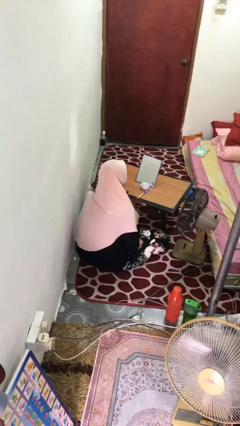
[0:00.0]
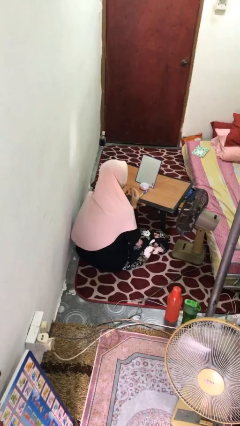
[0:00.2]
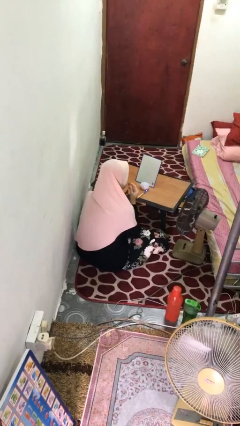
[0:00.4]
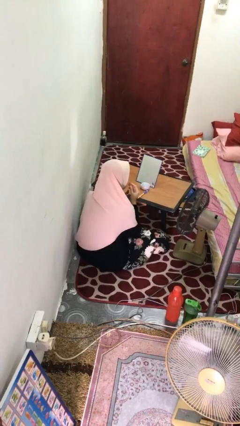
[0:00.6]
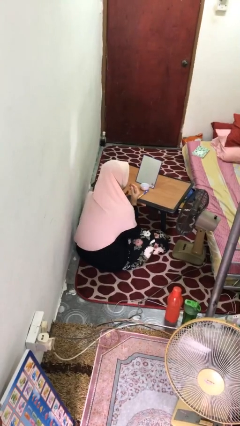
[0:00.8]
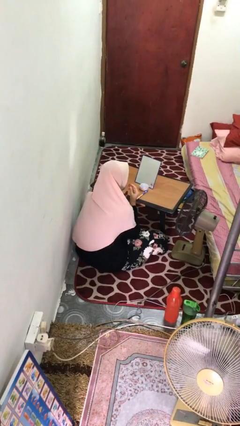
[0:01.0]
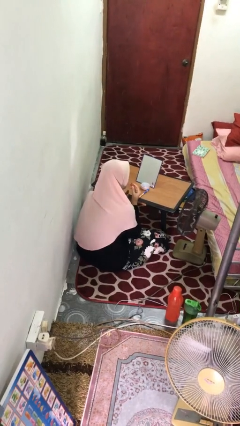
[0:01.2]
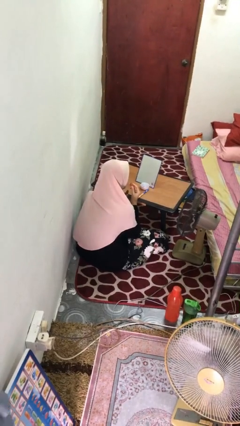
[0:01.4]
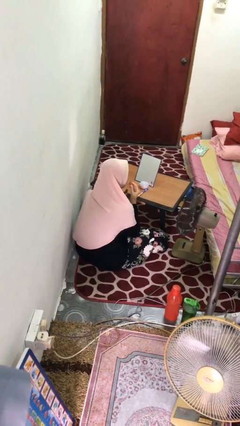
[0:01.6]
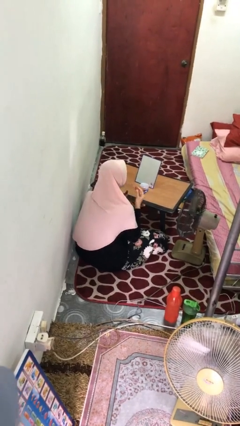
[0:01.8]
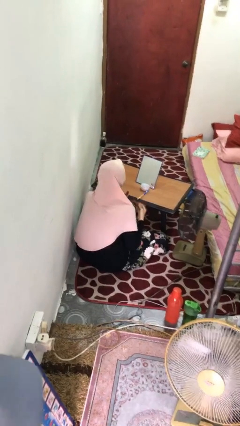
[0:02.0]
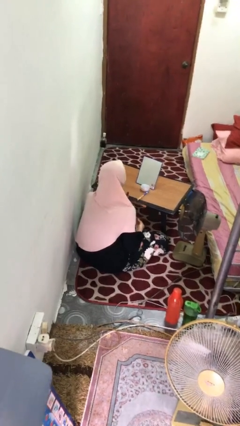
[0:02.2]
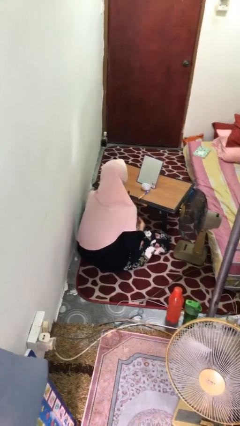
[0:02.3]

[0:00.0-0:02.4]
person applies lip makeup

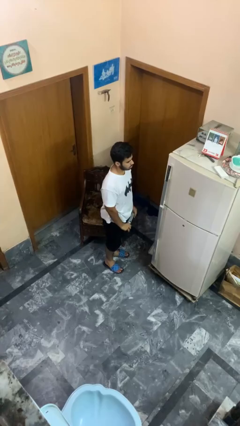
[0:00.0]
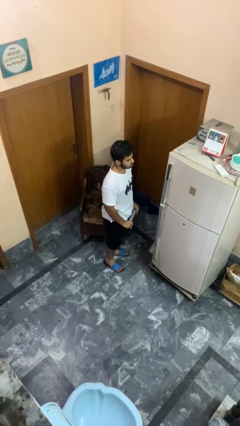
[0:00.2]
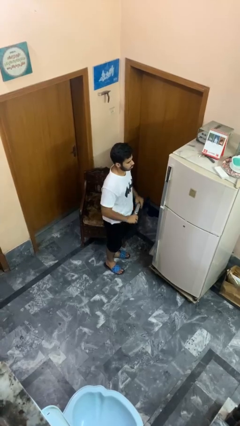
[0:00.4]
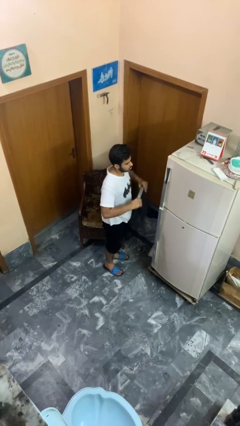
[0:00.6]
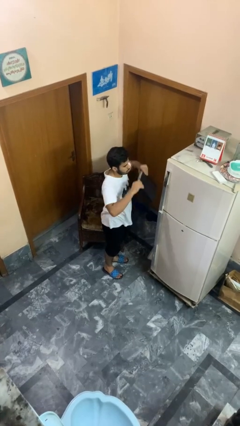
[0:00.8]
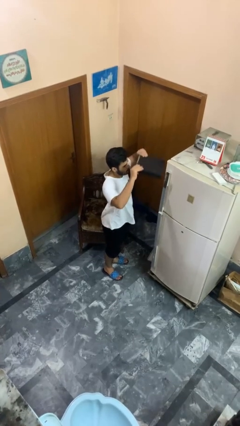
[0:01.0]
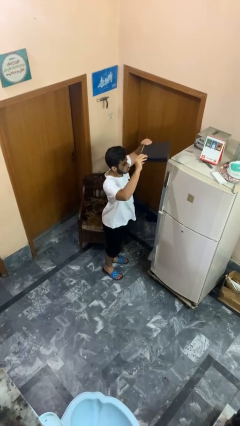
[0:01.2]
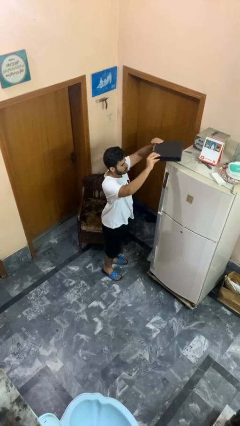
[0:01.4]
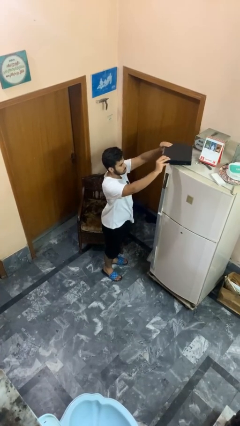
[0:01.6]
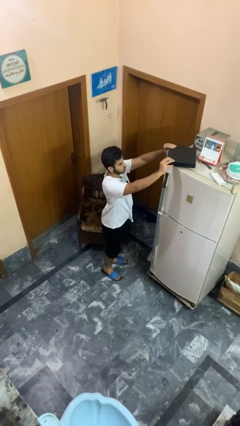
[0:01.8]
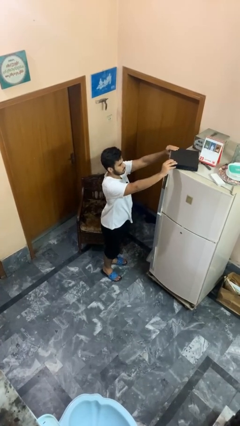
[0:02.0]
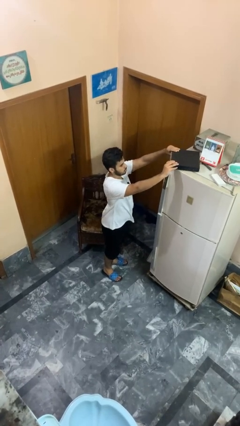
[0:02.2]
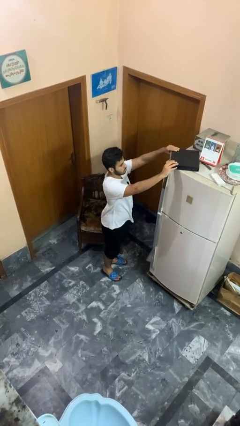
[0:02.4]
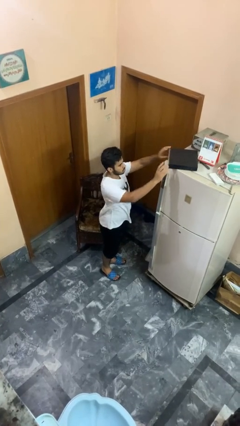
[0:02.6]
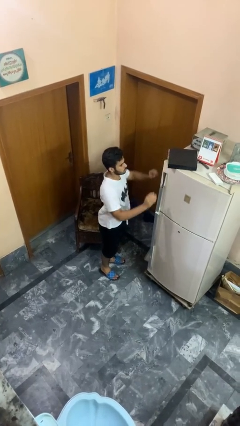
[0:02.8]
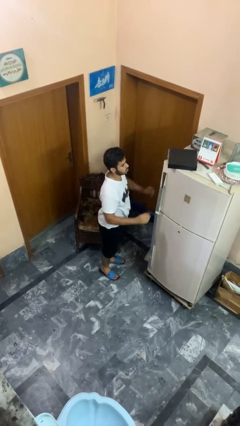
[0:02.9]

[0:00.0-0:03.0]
person puts down object on countertop

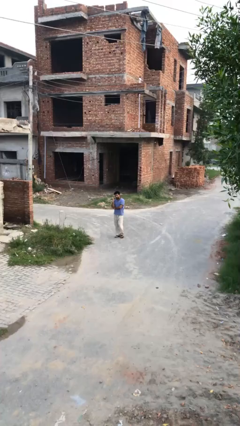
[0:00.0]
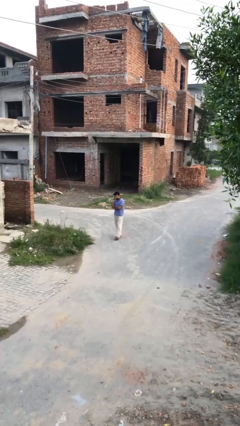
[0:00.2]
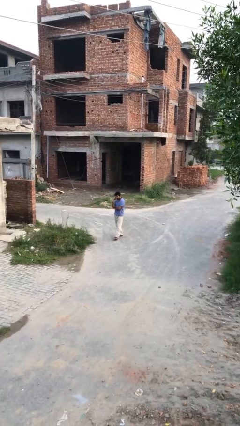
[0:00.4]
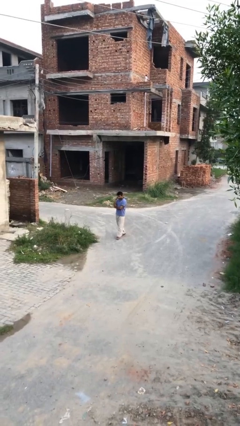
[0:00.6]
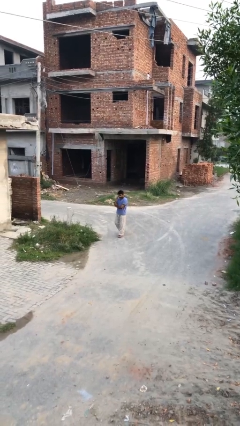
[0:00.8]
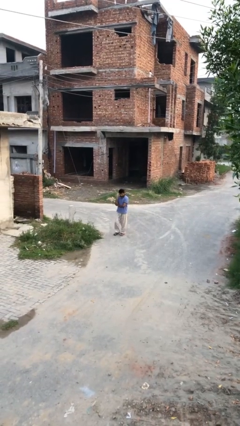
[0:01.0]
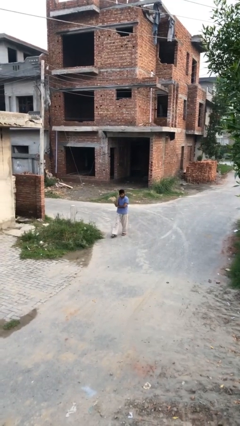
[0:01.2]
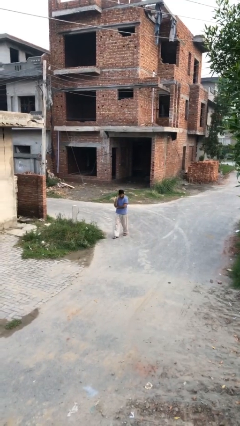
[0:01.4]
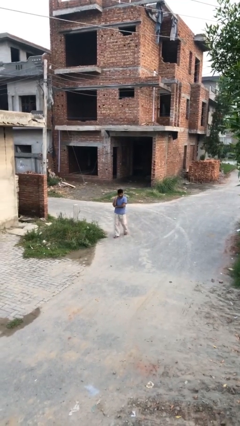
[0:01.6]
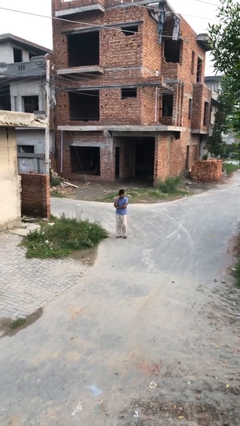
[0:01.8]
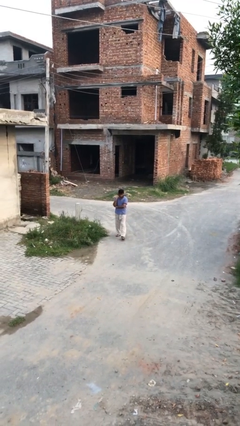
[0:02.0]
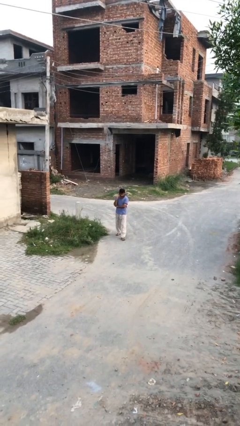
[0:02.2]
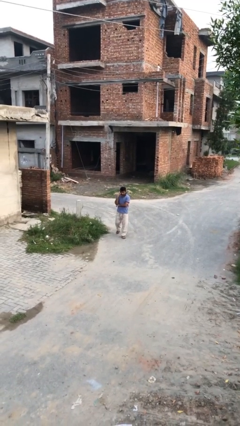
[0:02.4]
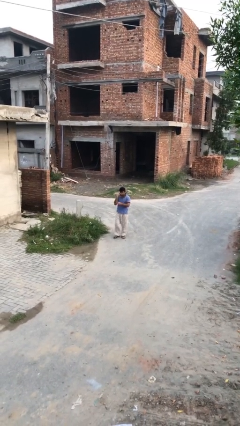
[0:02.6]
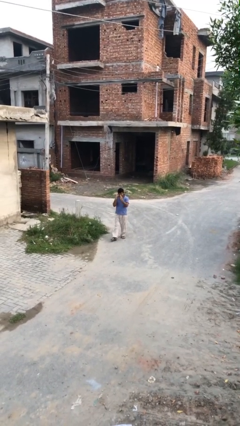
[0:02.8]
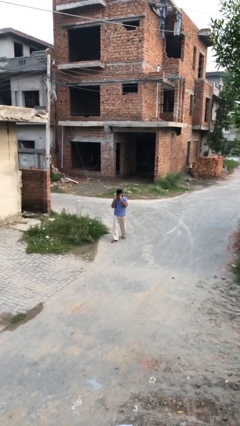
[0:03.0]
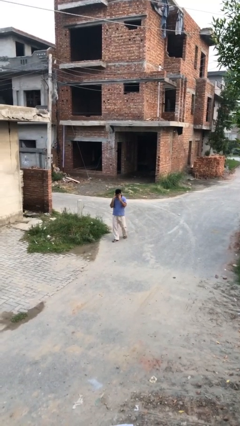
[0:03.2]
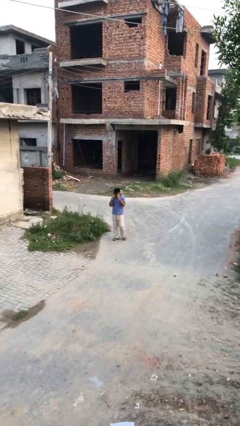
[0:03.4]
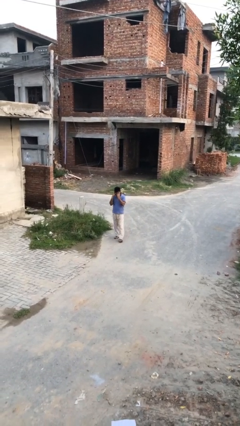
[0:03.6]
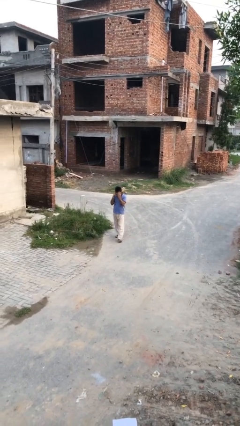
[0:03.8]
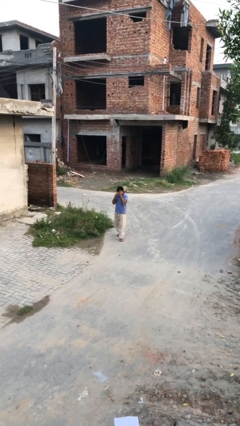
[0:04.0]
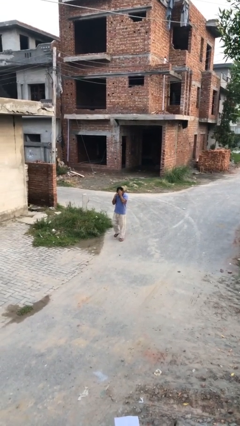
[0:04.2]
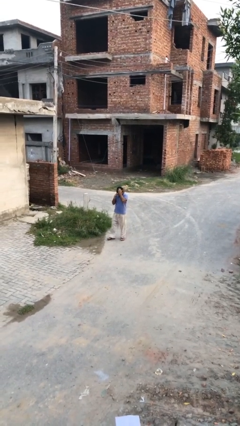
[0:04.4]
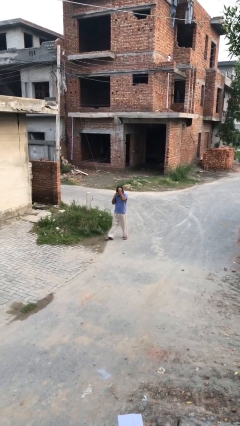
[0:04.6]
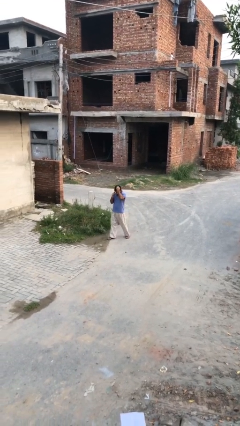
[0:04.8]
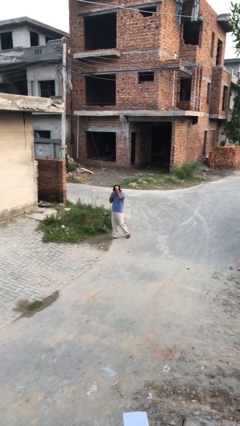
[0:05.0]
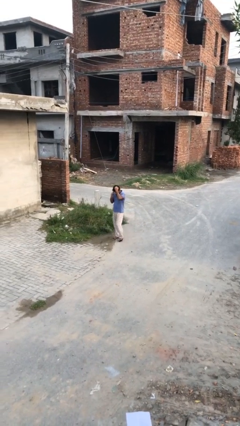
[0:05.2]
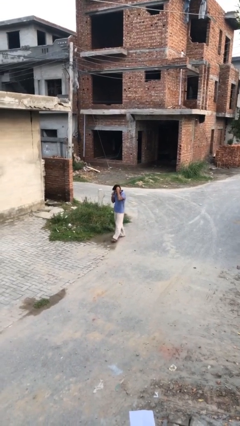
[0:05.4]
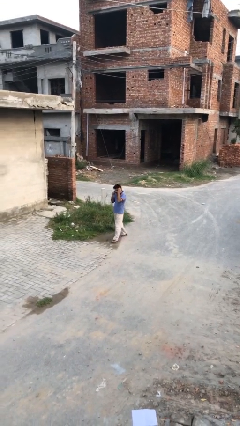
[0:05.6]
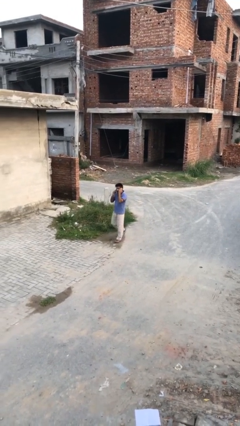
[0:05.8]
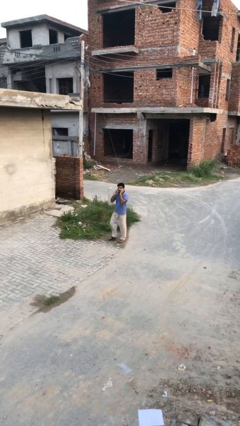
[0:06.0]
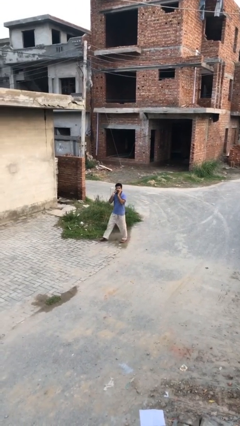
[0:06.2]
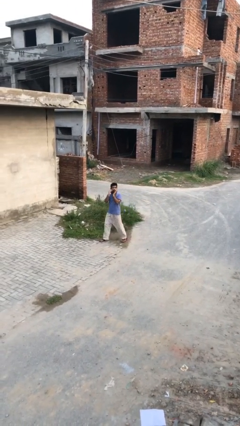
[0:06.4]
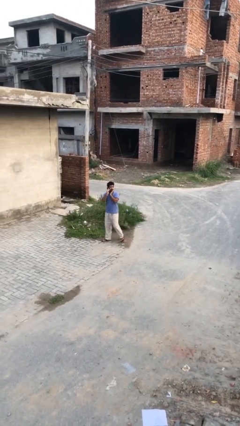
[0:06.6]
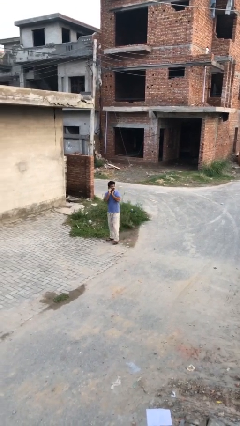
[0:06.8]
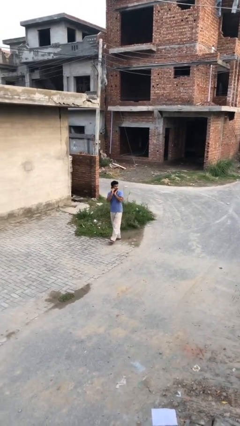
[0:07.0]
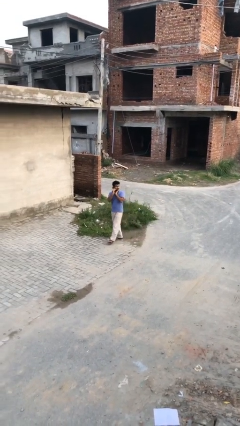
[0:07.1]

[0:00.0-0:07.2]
person talks on phone

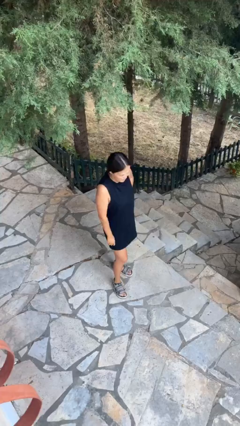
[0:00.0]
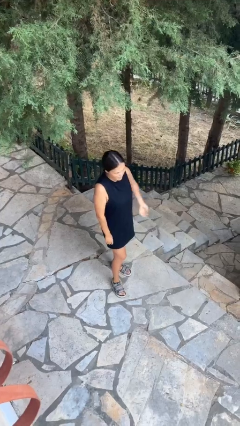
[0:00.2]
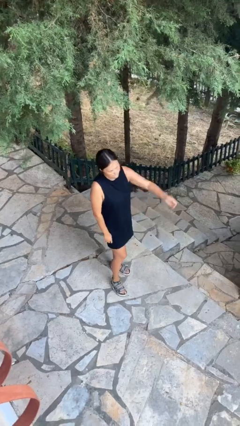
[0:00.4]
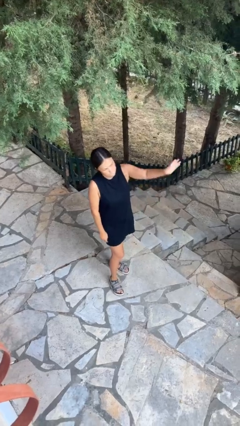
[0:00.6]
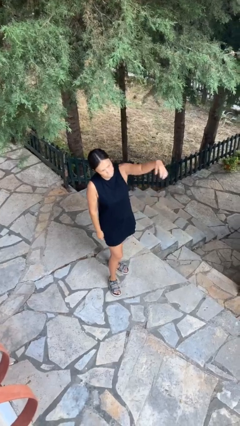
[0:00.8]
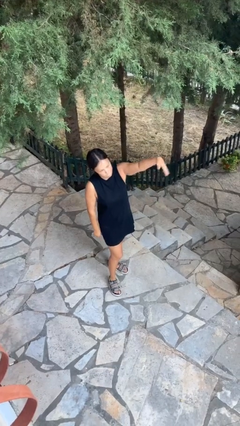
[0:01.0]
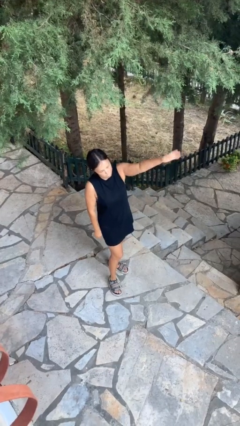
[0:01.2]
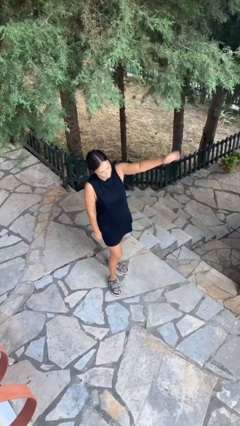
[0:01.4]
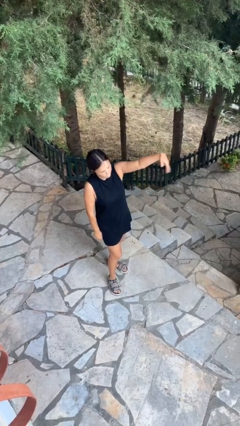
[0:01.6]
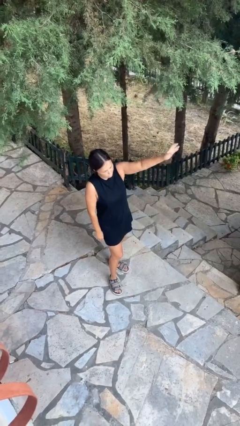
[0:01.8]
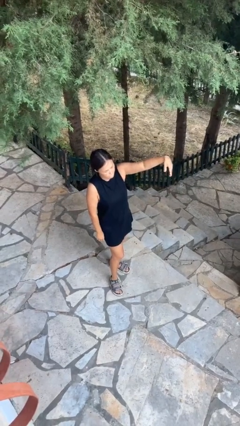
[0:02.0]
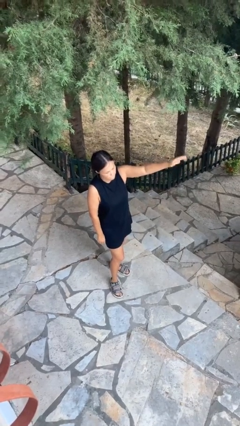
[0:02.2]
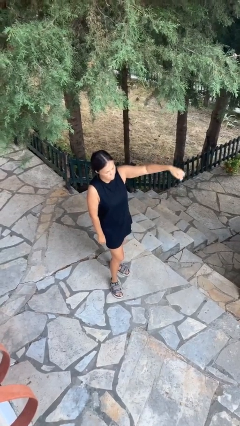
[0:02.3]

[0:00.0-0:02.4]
person gestures come here

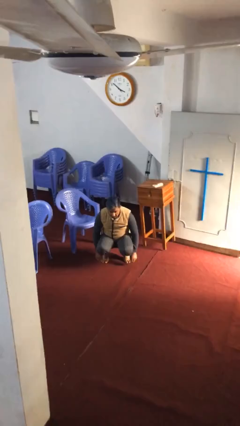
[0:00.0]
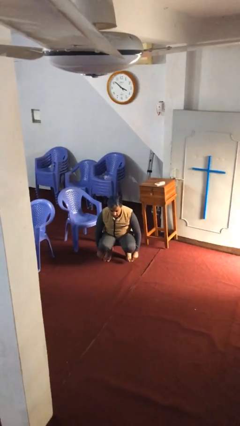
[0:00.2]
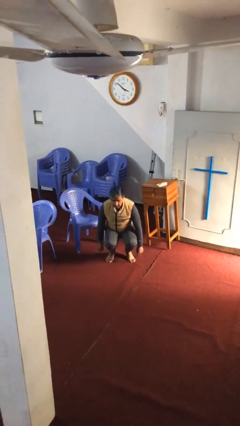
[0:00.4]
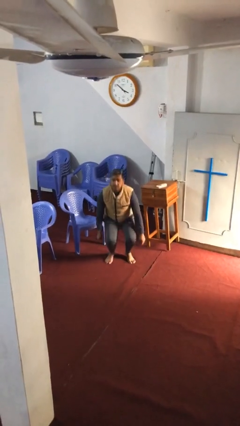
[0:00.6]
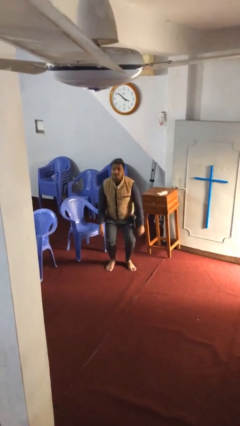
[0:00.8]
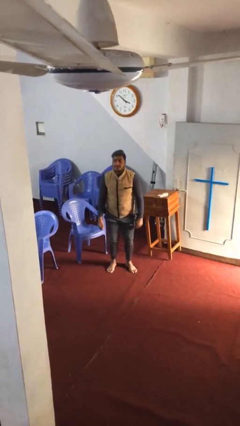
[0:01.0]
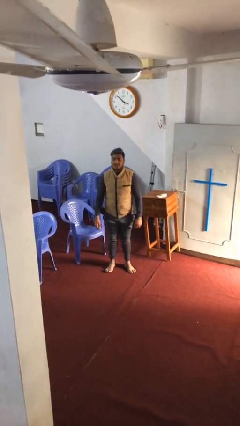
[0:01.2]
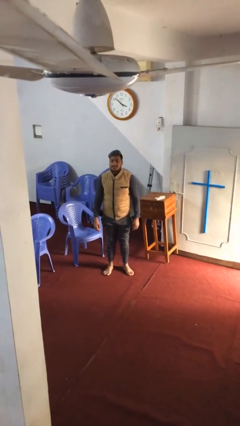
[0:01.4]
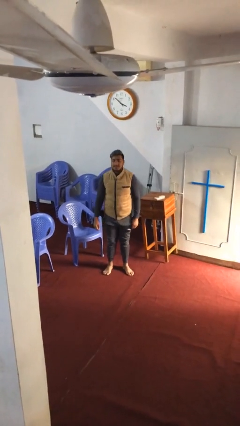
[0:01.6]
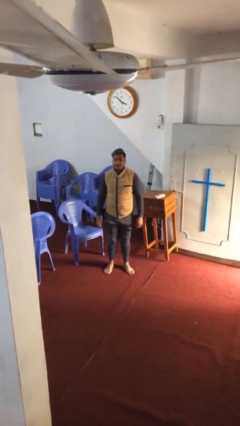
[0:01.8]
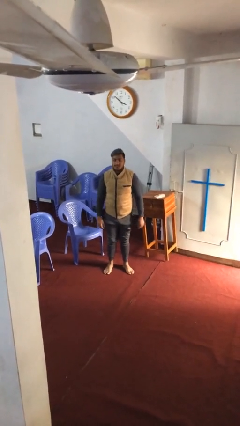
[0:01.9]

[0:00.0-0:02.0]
person stands up

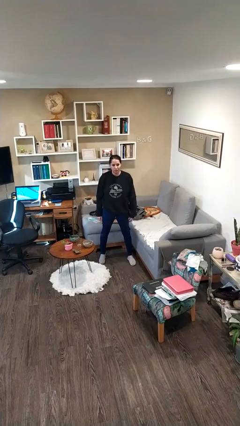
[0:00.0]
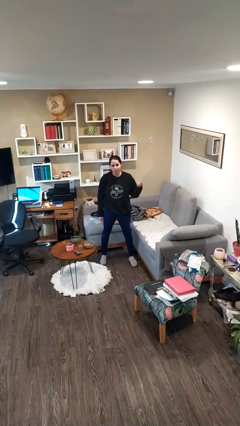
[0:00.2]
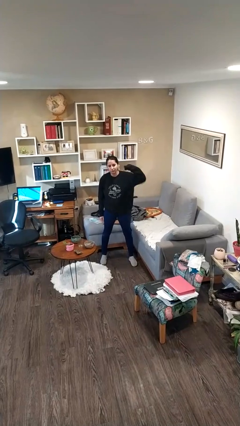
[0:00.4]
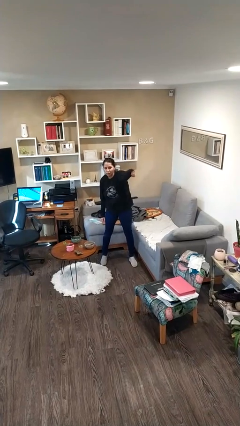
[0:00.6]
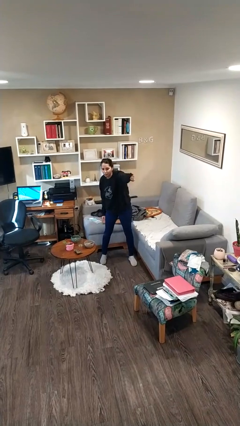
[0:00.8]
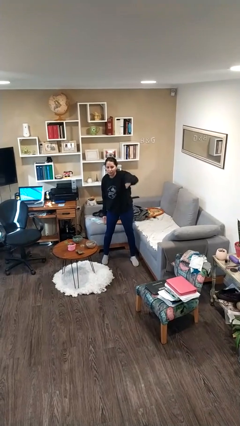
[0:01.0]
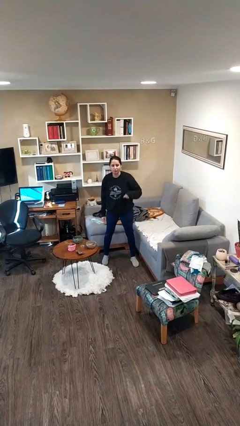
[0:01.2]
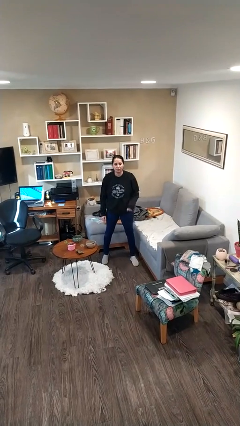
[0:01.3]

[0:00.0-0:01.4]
person punches
